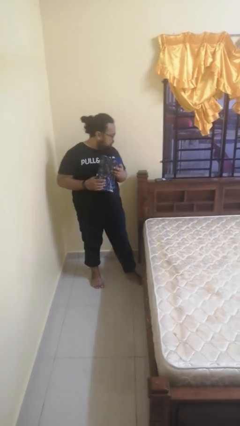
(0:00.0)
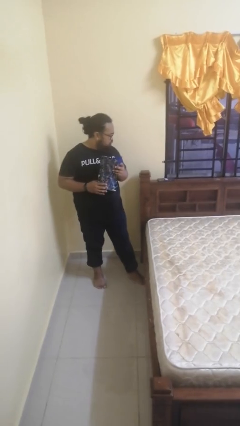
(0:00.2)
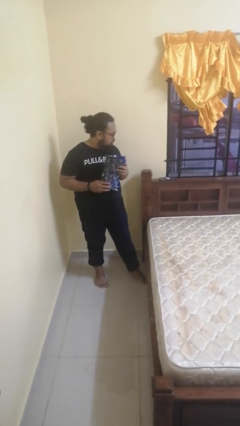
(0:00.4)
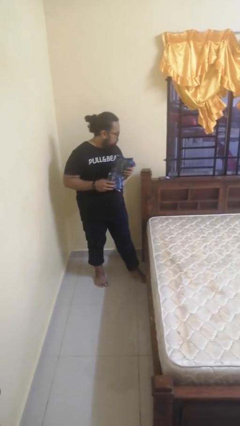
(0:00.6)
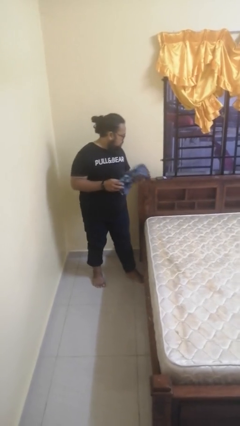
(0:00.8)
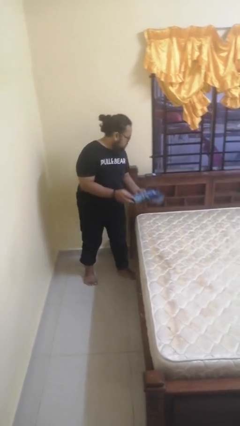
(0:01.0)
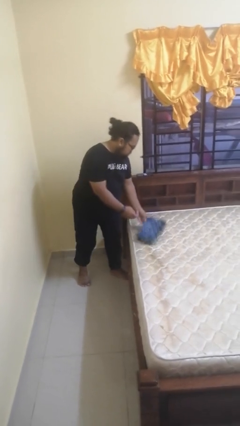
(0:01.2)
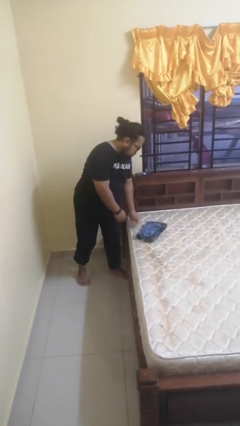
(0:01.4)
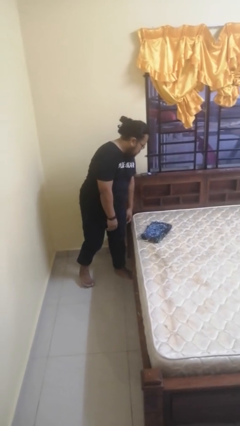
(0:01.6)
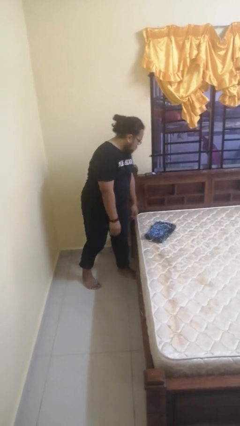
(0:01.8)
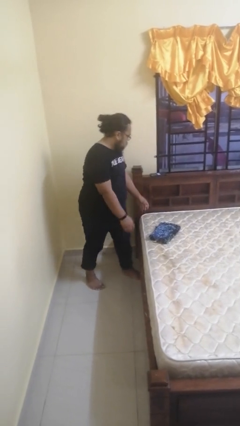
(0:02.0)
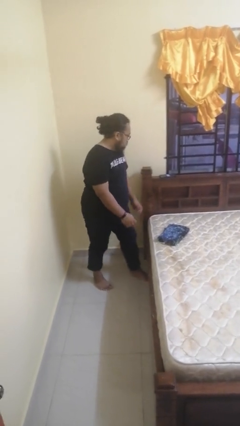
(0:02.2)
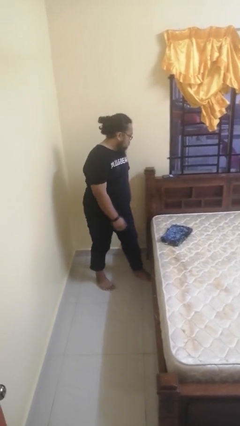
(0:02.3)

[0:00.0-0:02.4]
person puts down object on bed

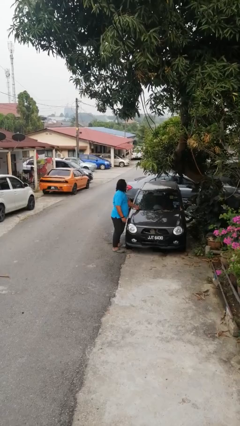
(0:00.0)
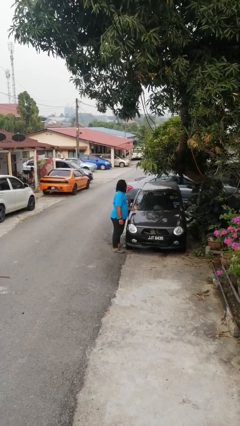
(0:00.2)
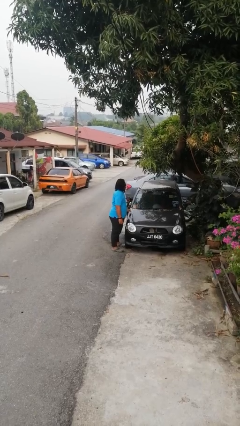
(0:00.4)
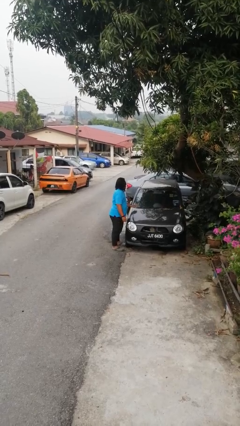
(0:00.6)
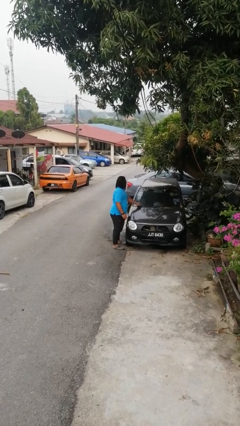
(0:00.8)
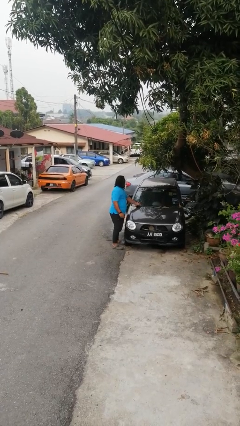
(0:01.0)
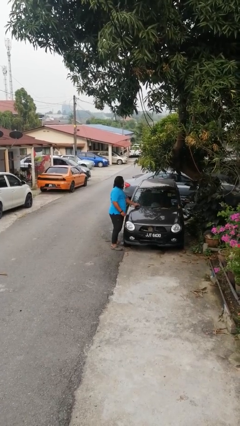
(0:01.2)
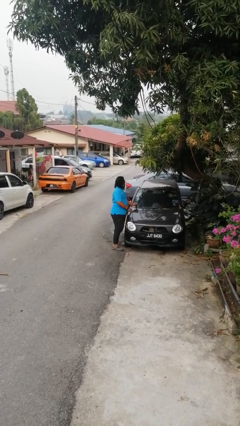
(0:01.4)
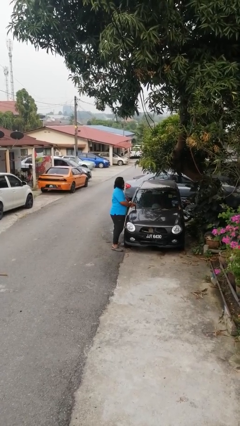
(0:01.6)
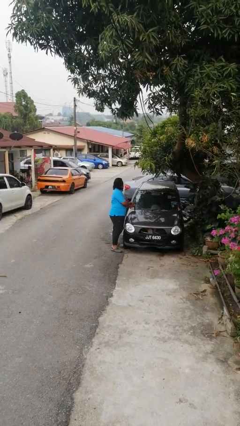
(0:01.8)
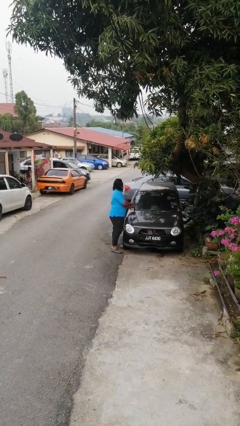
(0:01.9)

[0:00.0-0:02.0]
person flips up car wipers

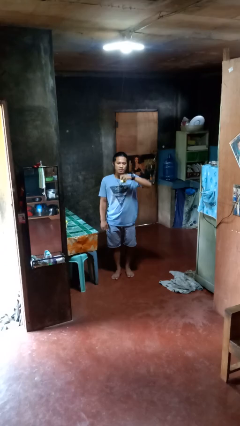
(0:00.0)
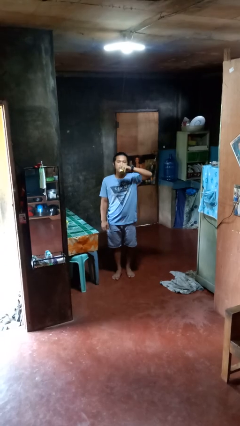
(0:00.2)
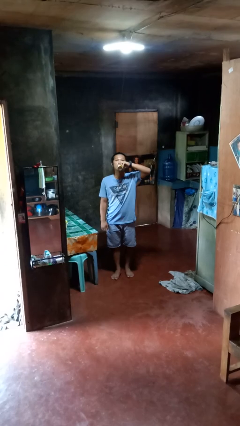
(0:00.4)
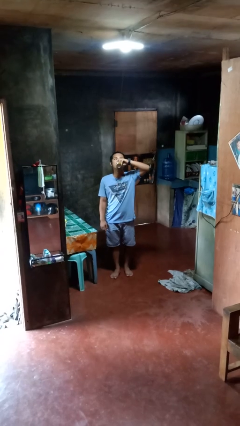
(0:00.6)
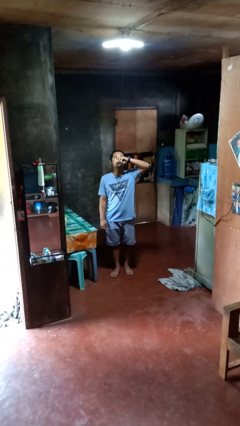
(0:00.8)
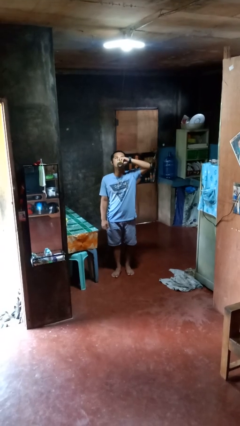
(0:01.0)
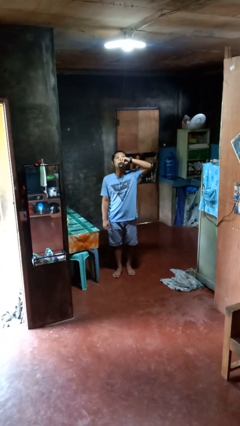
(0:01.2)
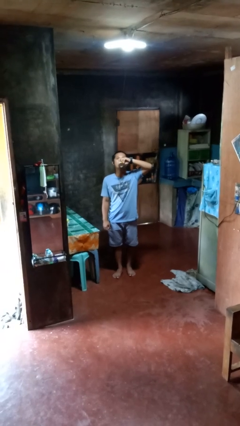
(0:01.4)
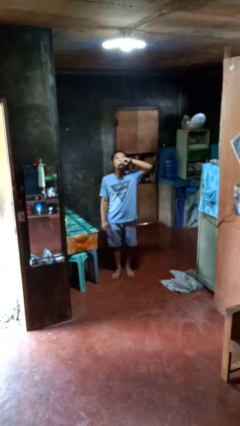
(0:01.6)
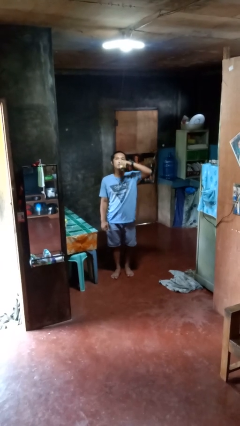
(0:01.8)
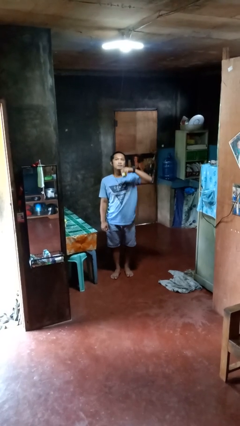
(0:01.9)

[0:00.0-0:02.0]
person drinks from beverage can

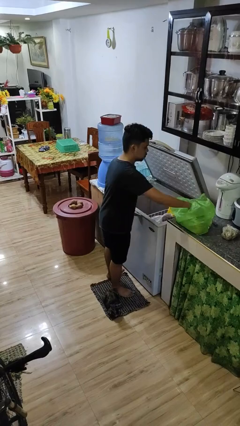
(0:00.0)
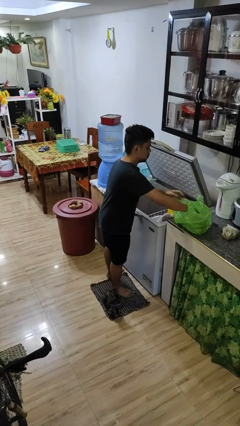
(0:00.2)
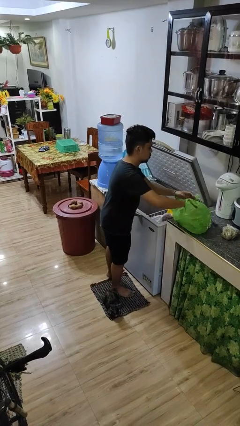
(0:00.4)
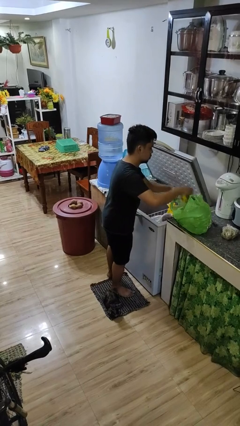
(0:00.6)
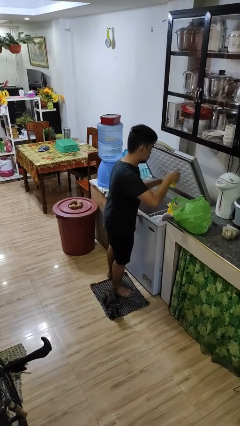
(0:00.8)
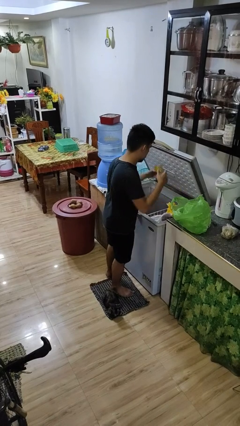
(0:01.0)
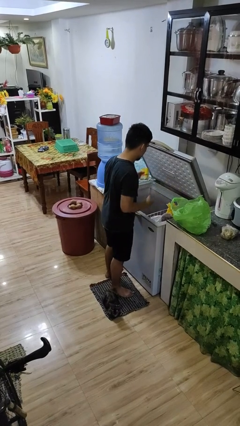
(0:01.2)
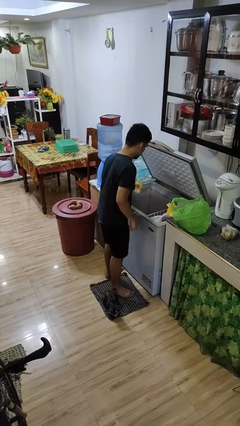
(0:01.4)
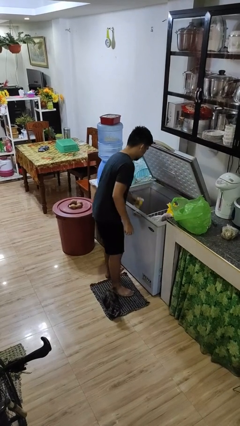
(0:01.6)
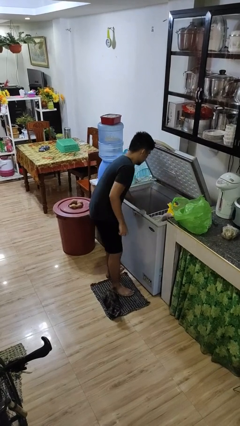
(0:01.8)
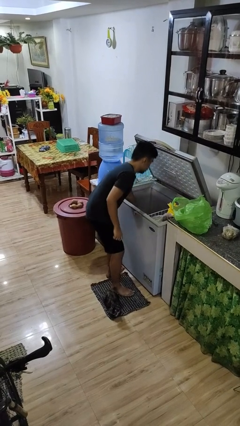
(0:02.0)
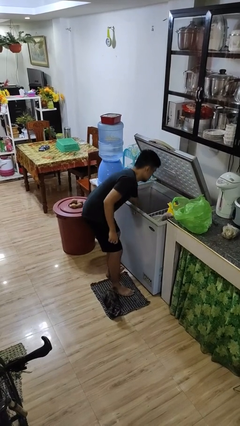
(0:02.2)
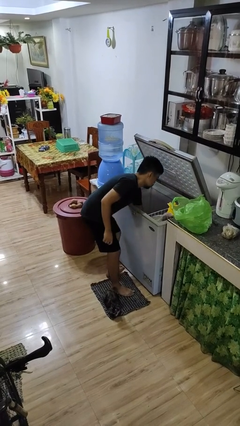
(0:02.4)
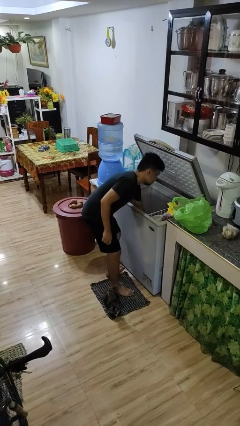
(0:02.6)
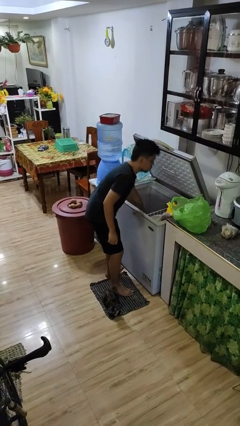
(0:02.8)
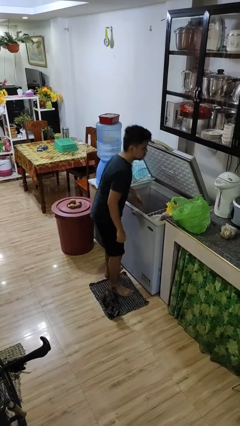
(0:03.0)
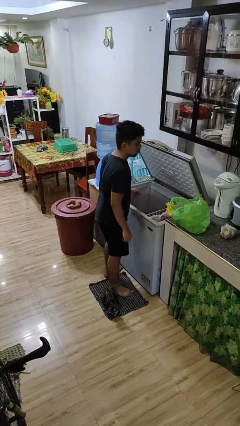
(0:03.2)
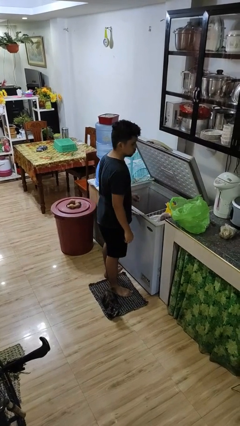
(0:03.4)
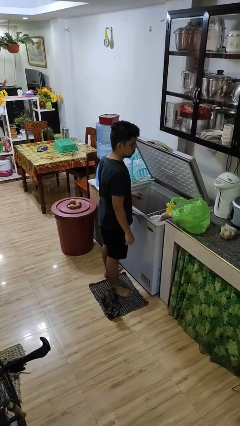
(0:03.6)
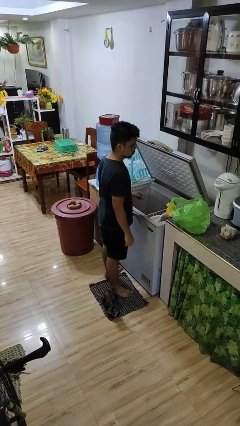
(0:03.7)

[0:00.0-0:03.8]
person loads groceries into refrigerator

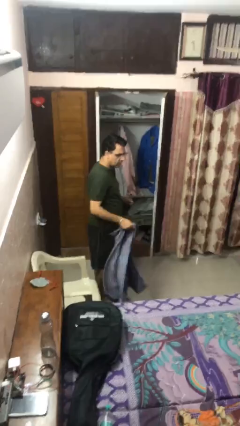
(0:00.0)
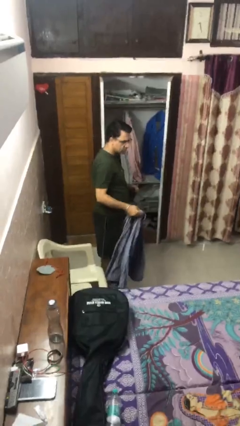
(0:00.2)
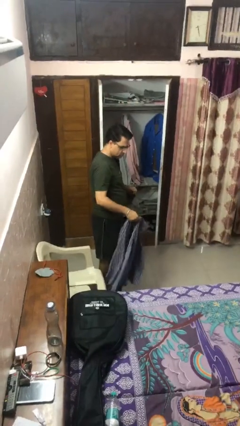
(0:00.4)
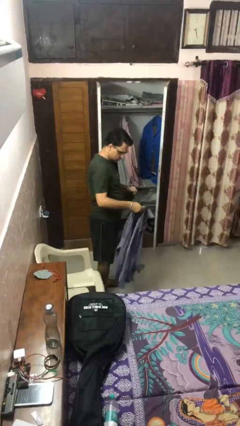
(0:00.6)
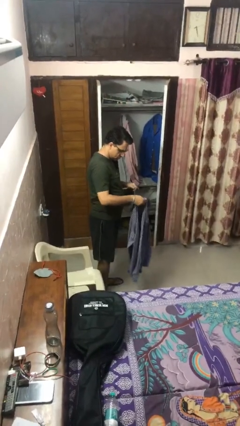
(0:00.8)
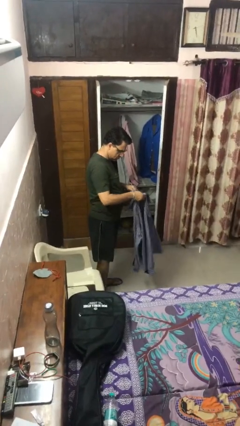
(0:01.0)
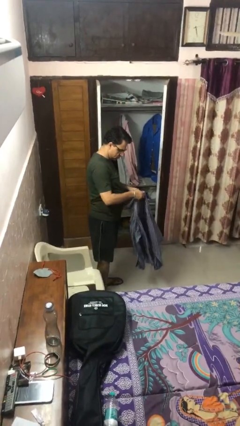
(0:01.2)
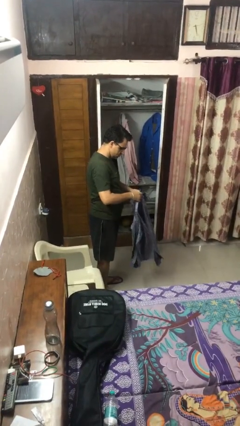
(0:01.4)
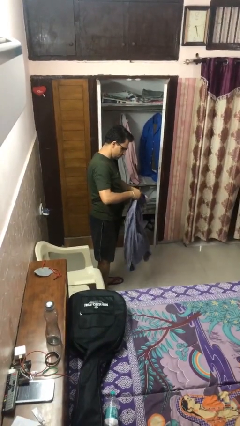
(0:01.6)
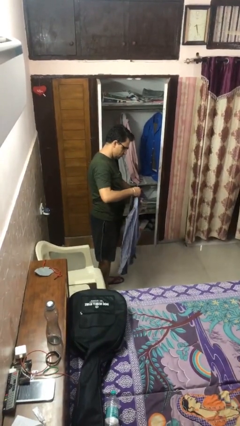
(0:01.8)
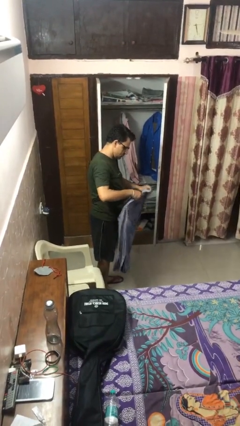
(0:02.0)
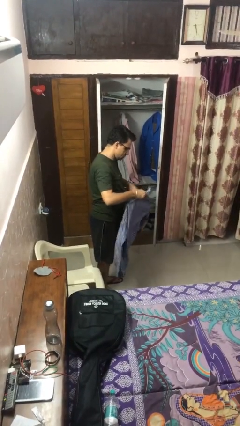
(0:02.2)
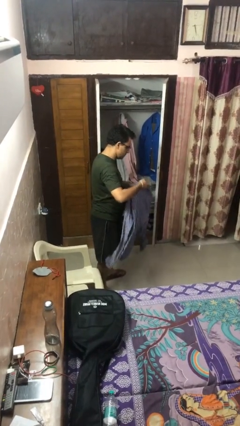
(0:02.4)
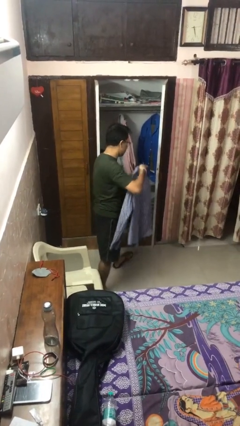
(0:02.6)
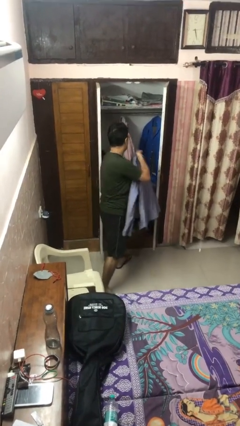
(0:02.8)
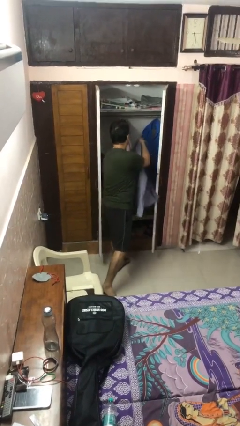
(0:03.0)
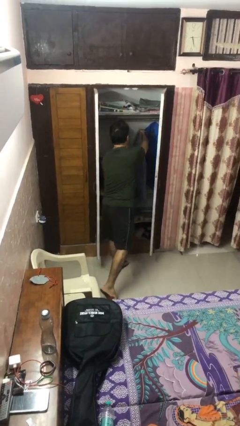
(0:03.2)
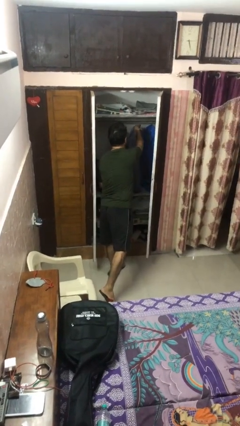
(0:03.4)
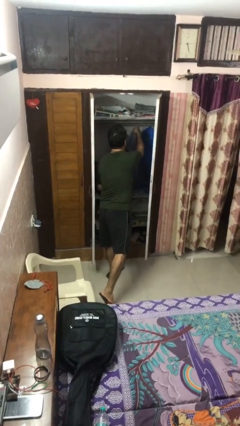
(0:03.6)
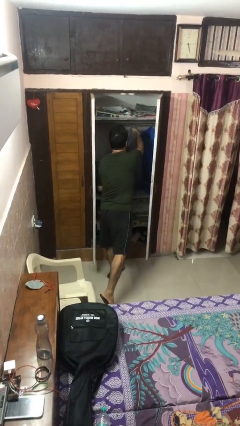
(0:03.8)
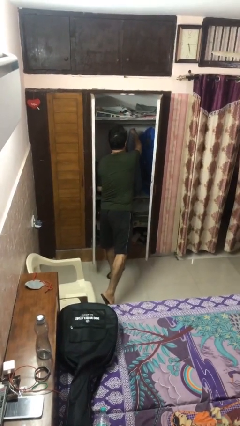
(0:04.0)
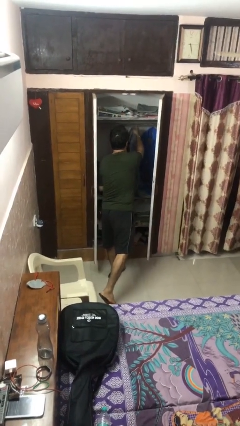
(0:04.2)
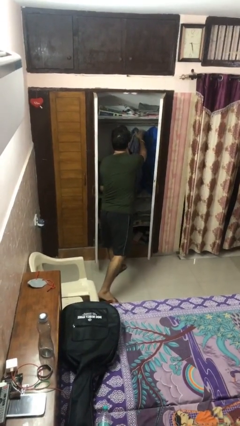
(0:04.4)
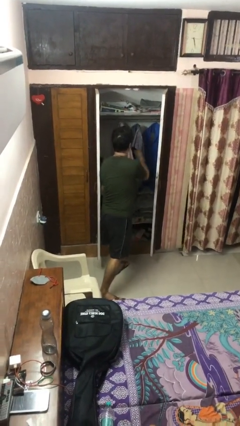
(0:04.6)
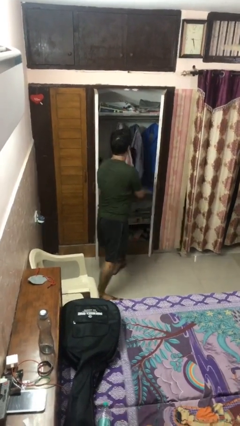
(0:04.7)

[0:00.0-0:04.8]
person puts clothes into closet

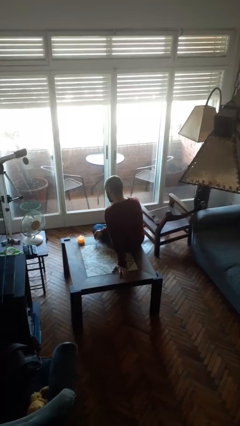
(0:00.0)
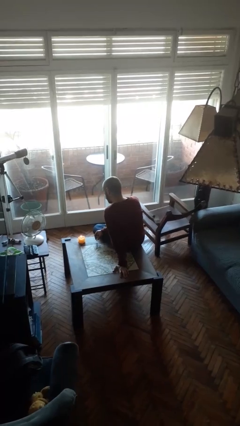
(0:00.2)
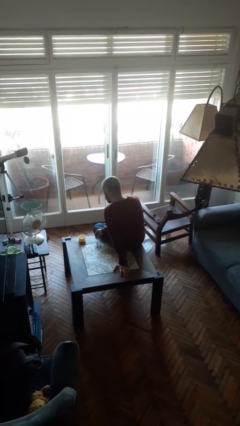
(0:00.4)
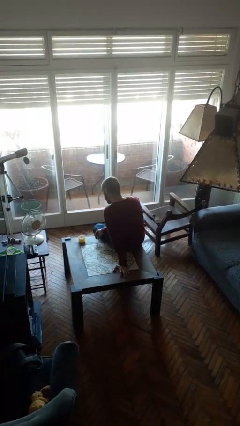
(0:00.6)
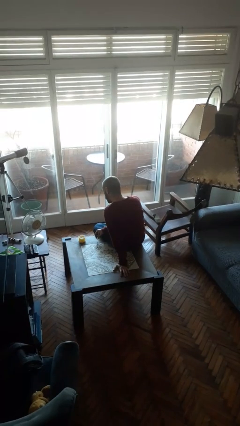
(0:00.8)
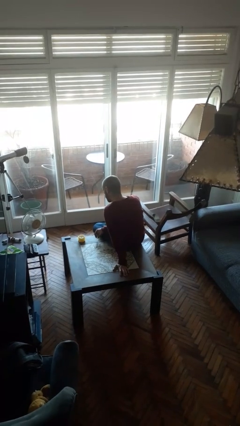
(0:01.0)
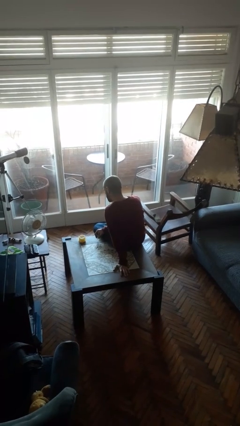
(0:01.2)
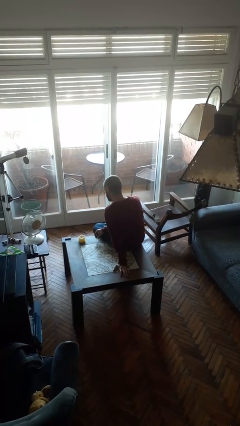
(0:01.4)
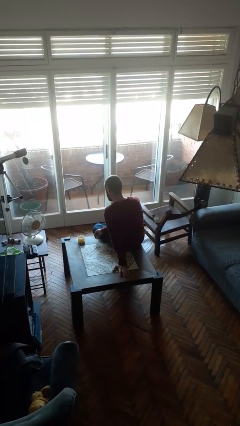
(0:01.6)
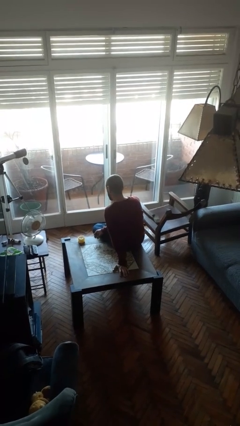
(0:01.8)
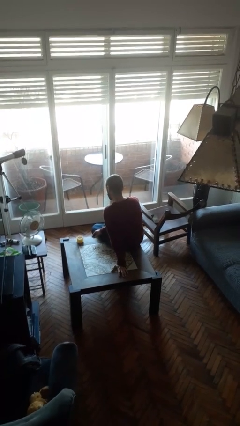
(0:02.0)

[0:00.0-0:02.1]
person extinguishes candle

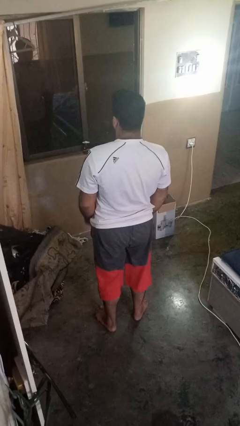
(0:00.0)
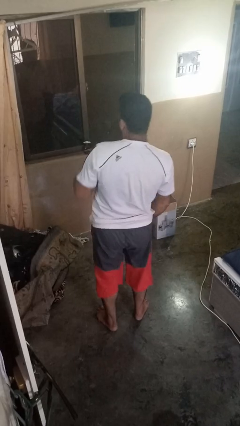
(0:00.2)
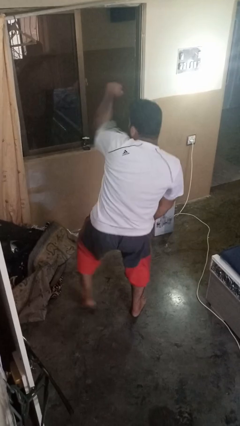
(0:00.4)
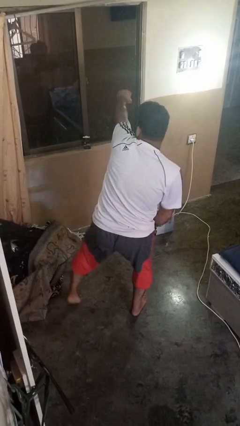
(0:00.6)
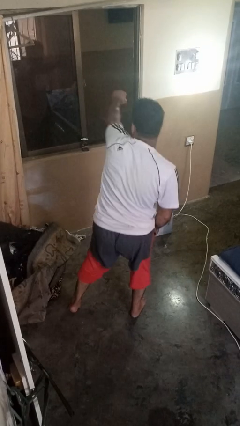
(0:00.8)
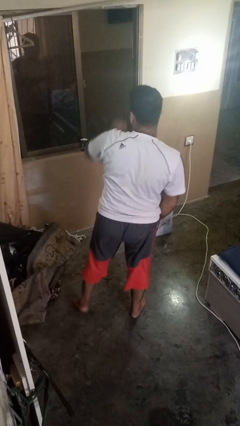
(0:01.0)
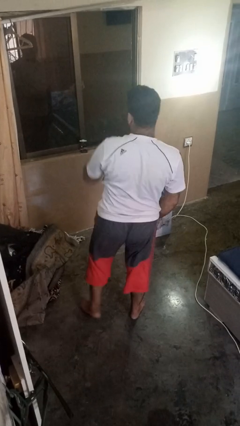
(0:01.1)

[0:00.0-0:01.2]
person karate chop
